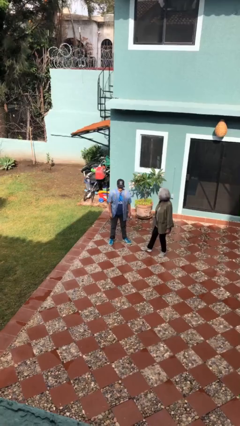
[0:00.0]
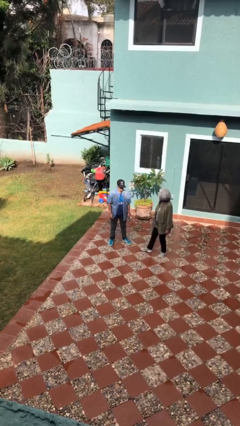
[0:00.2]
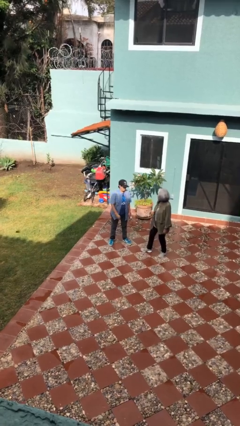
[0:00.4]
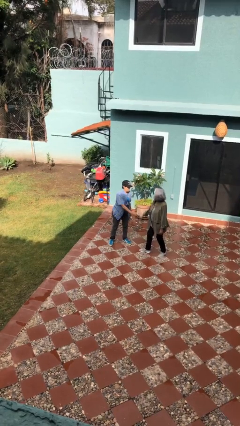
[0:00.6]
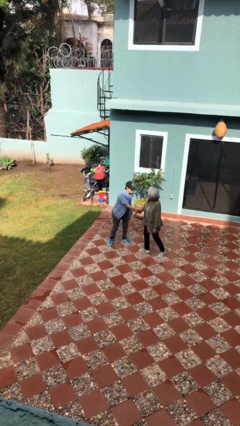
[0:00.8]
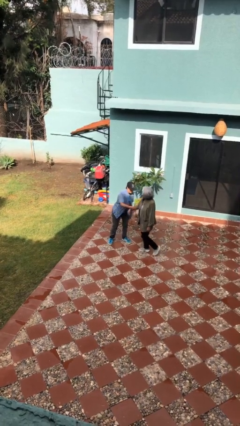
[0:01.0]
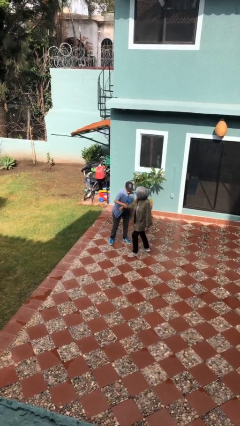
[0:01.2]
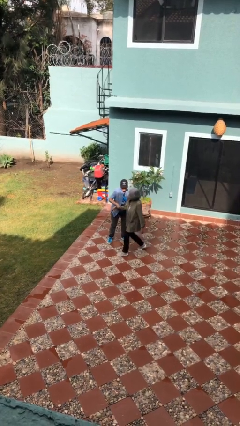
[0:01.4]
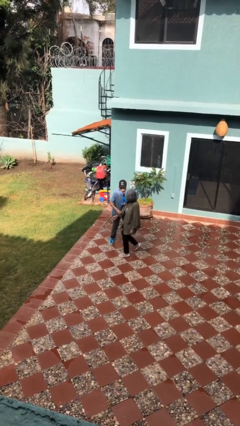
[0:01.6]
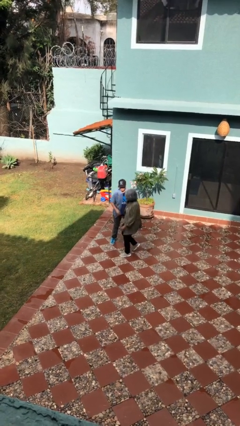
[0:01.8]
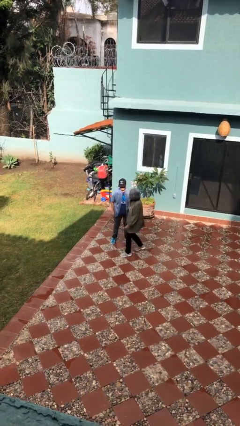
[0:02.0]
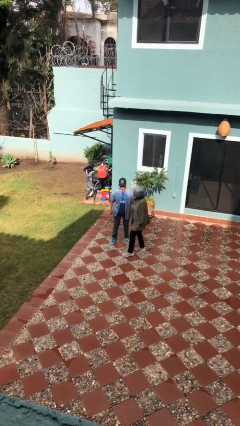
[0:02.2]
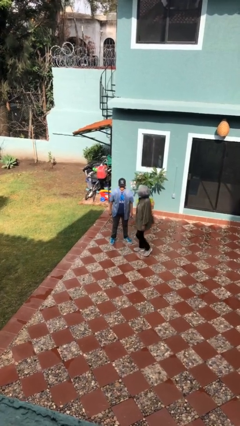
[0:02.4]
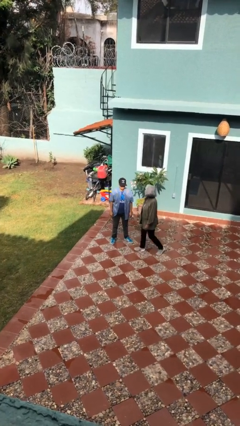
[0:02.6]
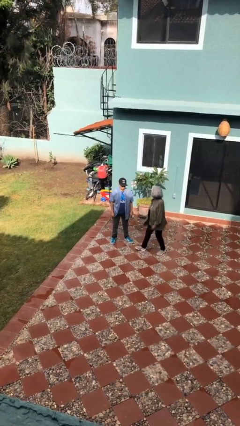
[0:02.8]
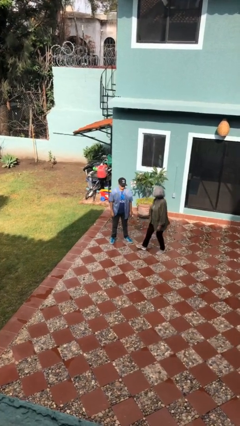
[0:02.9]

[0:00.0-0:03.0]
person grabs person by forearm

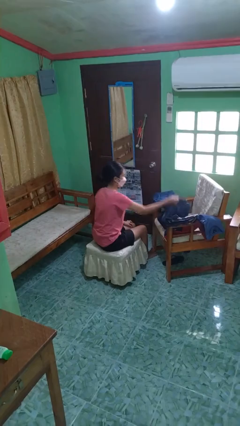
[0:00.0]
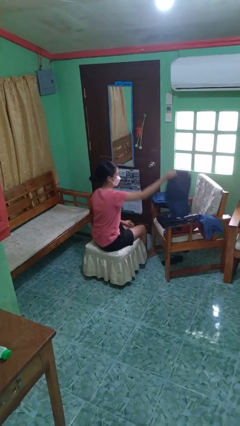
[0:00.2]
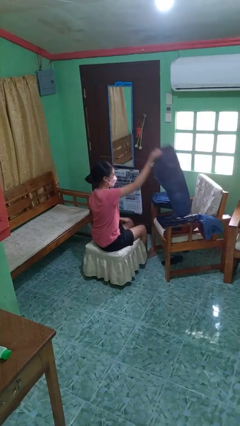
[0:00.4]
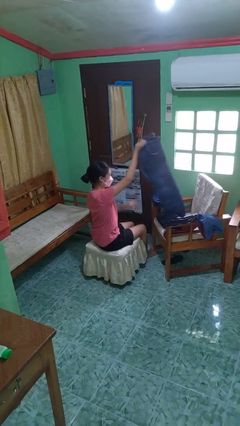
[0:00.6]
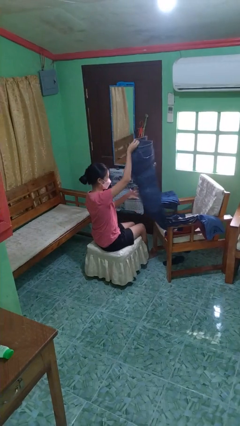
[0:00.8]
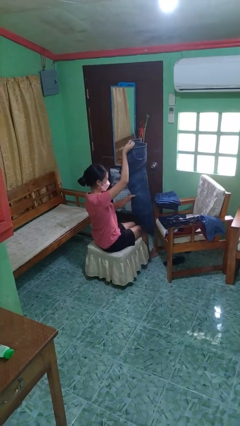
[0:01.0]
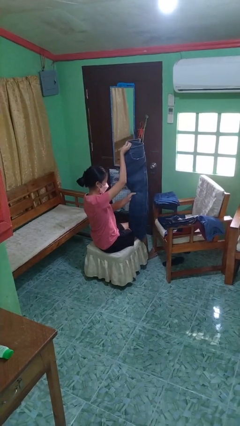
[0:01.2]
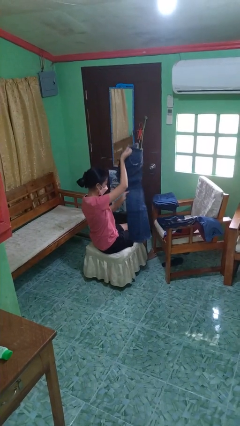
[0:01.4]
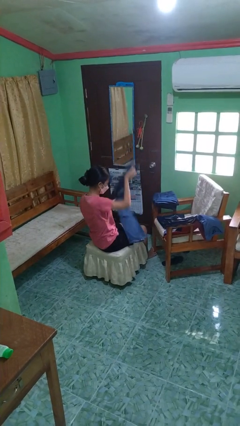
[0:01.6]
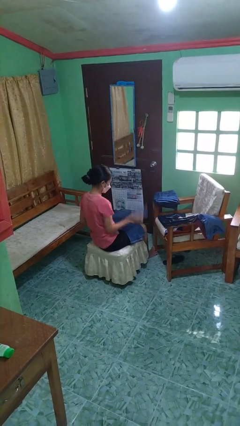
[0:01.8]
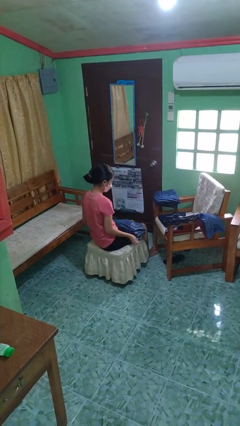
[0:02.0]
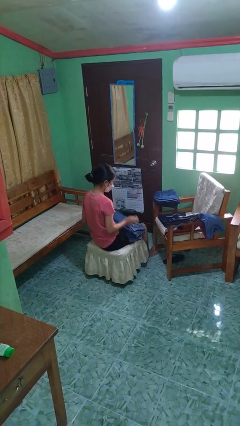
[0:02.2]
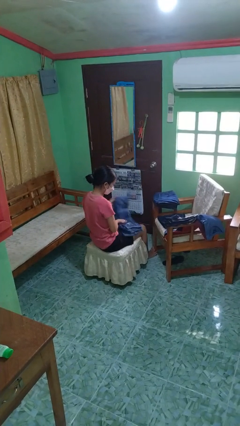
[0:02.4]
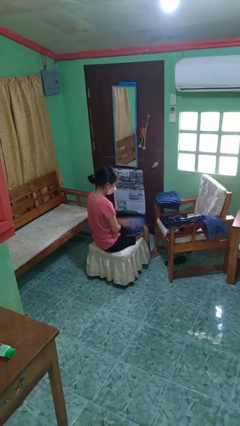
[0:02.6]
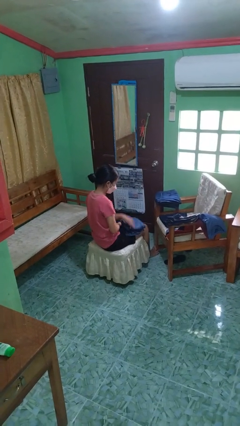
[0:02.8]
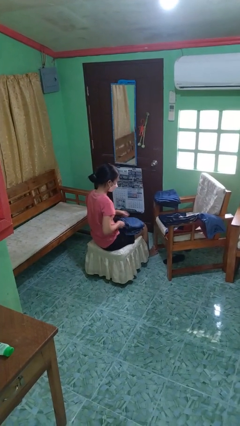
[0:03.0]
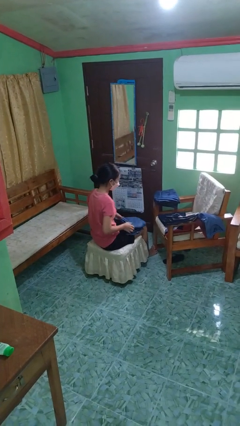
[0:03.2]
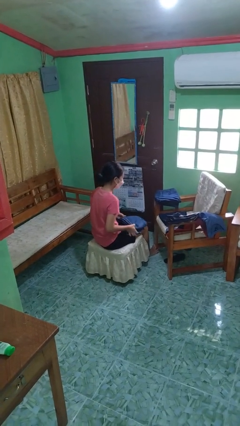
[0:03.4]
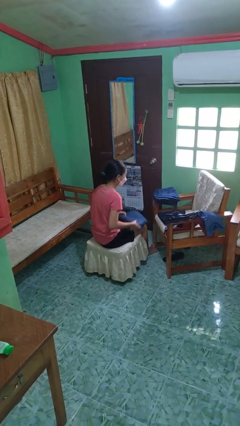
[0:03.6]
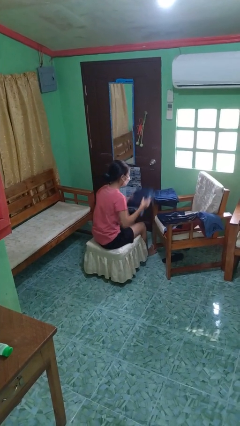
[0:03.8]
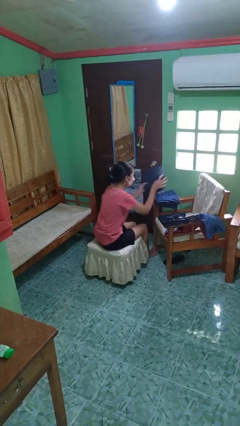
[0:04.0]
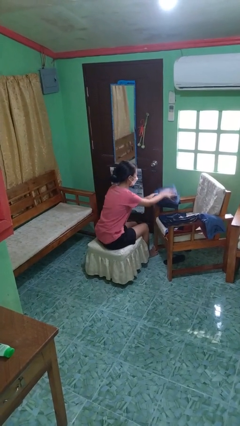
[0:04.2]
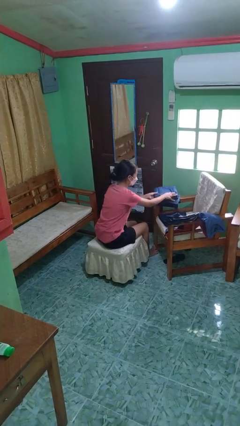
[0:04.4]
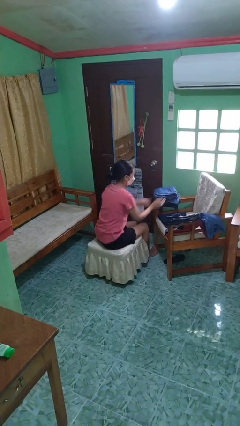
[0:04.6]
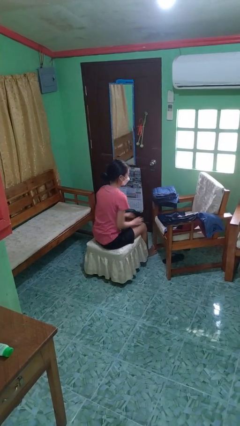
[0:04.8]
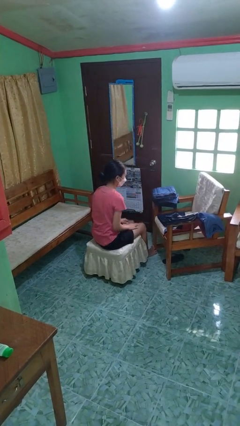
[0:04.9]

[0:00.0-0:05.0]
person folds pants

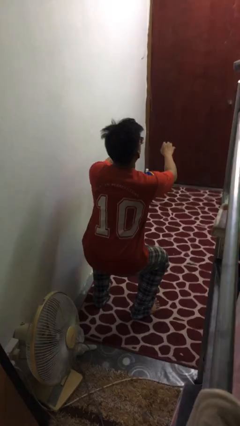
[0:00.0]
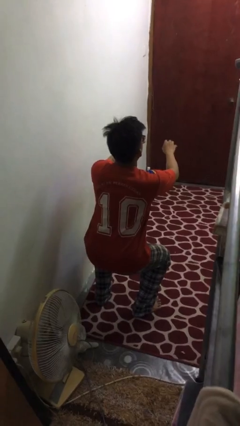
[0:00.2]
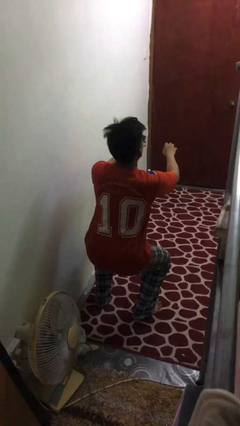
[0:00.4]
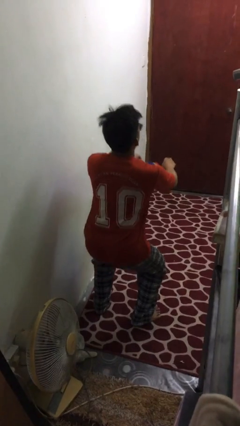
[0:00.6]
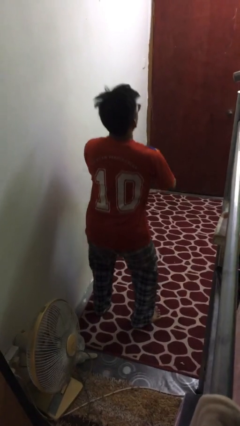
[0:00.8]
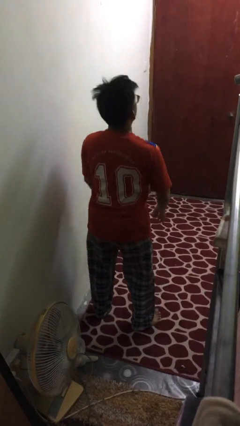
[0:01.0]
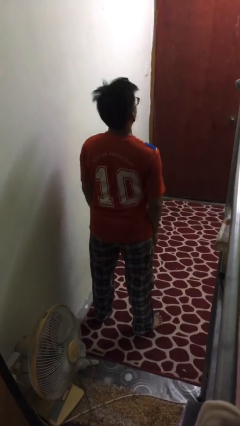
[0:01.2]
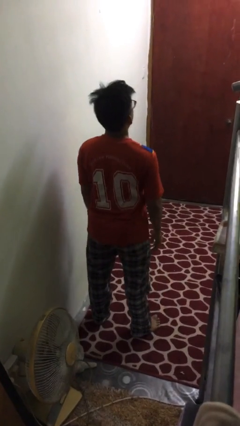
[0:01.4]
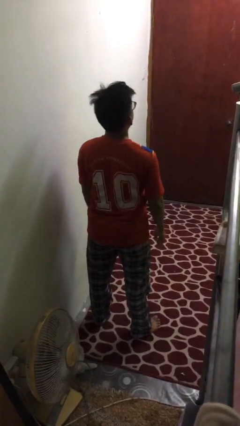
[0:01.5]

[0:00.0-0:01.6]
person stands up

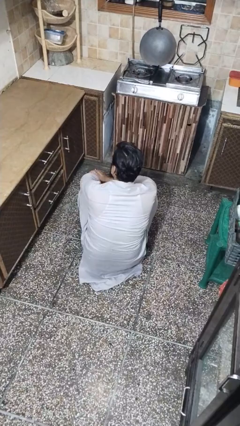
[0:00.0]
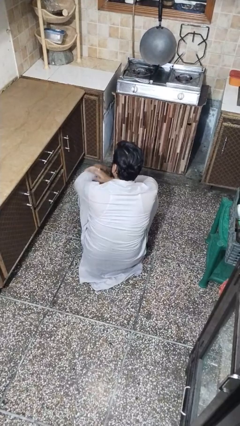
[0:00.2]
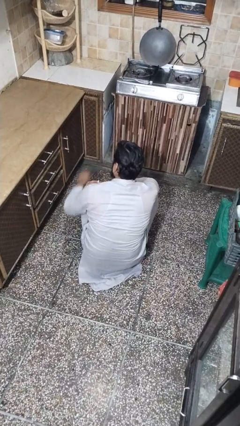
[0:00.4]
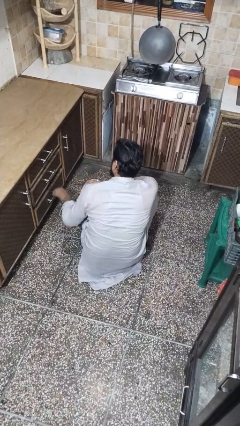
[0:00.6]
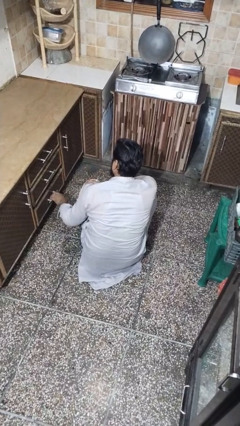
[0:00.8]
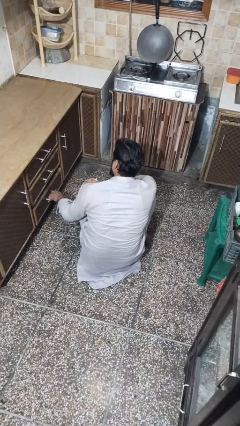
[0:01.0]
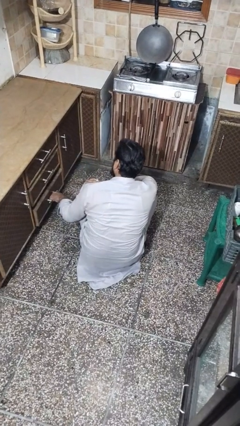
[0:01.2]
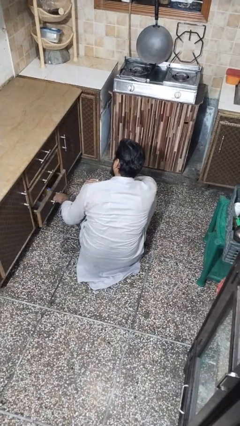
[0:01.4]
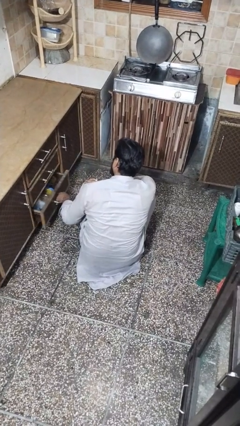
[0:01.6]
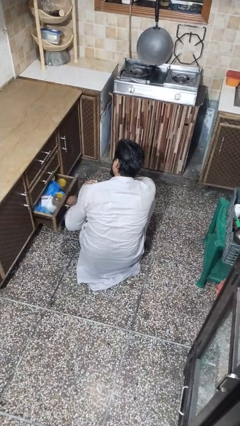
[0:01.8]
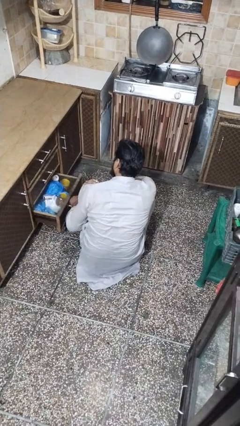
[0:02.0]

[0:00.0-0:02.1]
person opens kitchen drawer

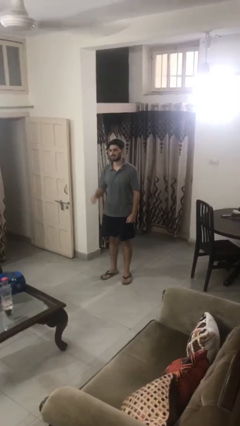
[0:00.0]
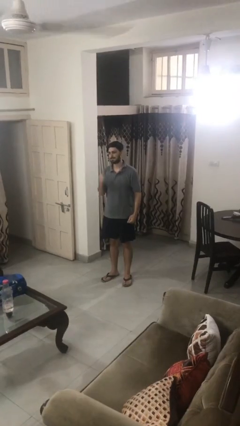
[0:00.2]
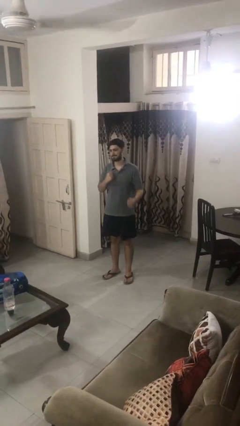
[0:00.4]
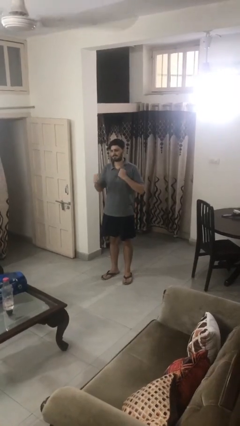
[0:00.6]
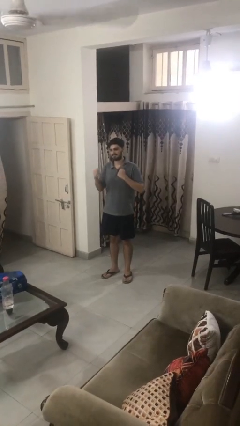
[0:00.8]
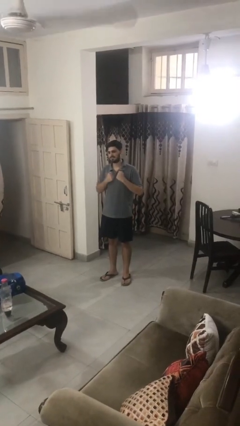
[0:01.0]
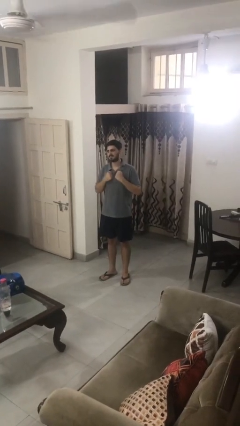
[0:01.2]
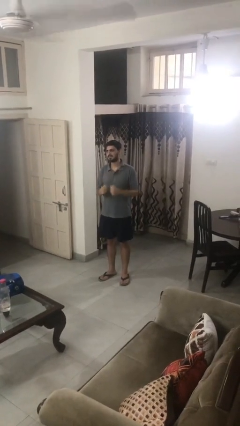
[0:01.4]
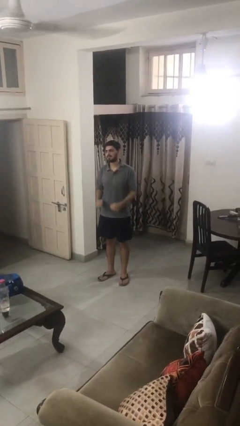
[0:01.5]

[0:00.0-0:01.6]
person drums on chest

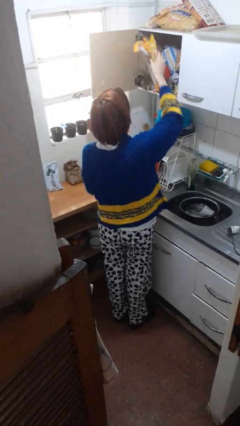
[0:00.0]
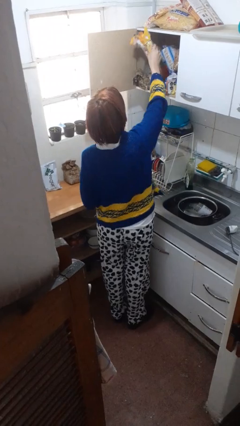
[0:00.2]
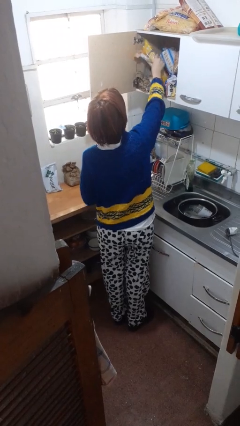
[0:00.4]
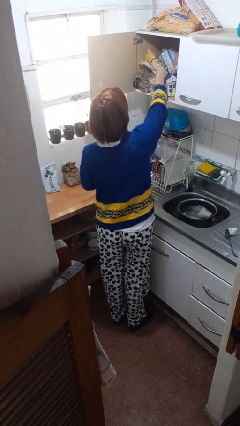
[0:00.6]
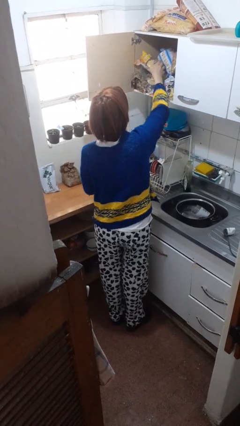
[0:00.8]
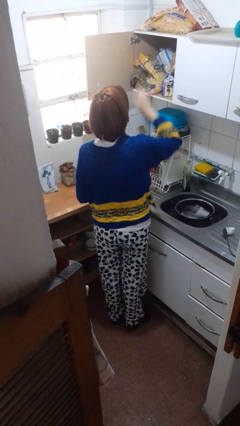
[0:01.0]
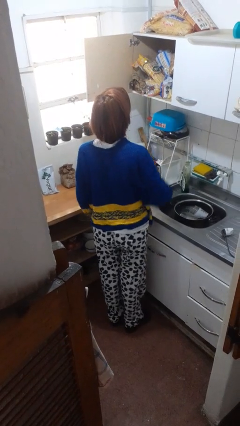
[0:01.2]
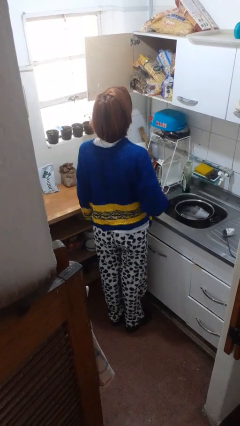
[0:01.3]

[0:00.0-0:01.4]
person puts object in cabinet

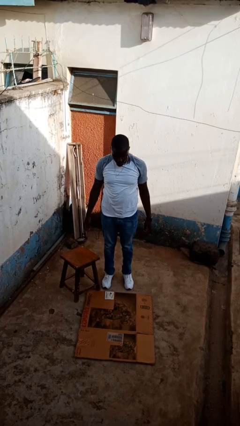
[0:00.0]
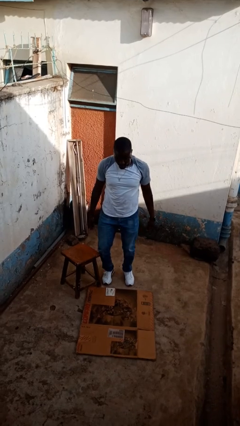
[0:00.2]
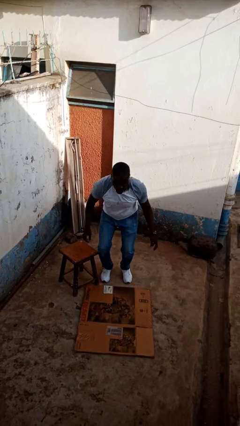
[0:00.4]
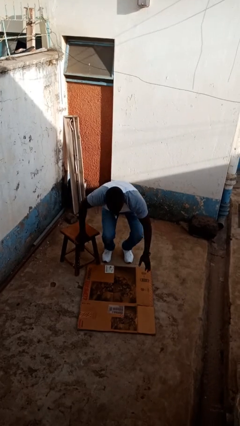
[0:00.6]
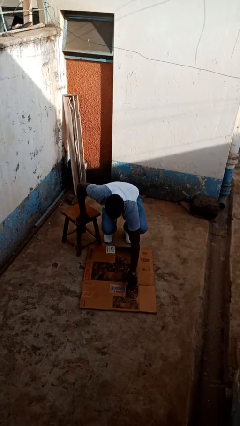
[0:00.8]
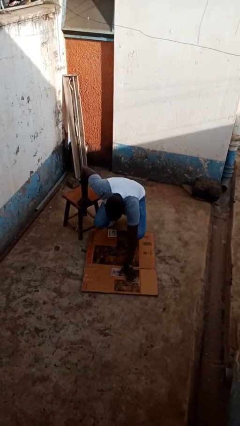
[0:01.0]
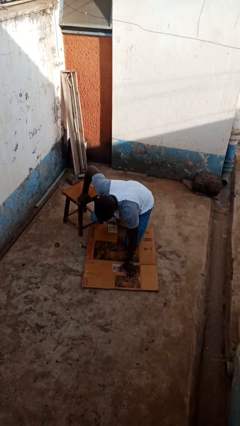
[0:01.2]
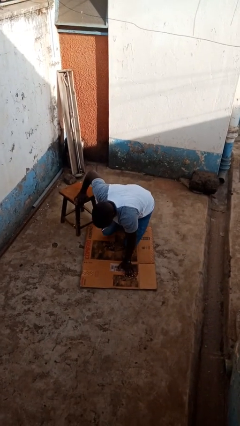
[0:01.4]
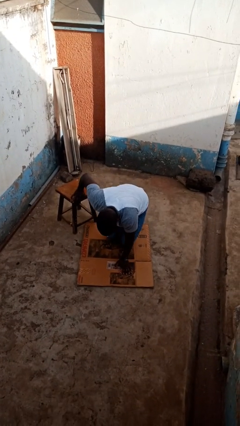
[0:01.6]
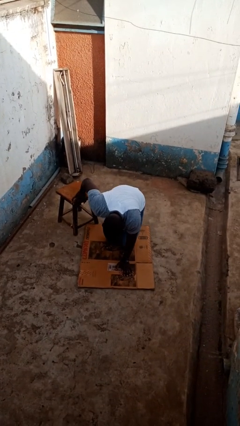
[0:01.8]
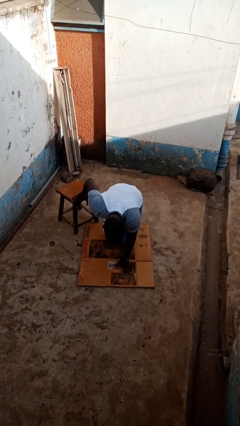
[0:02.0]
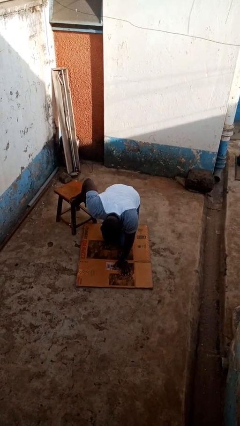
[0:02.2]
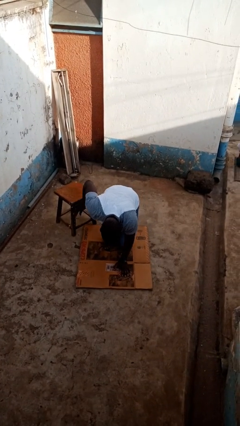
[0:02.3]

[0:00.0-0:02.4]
person trips on object on floor
